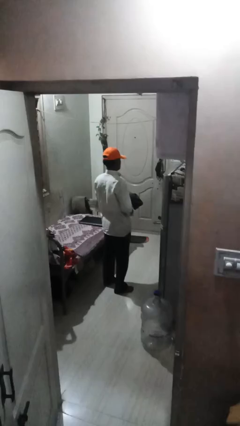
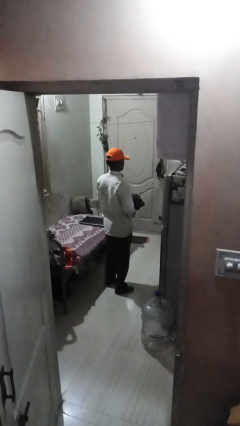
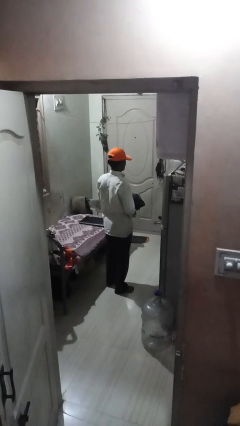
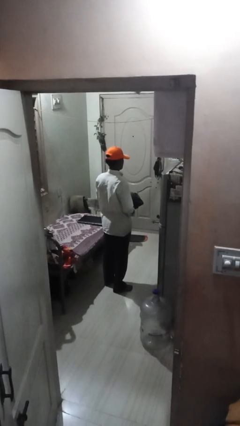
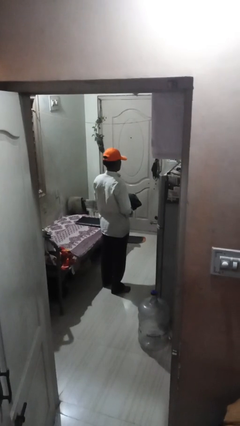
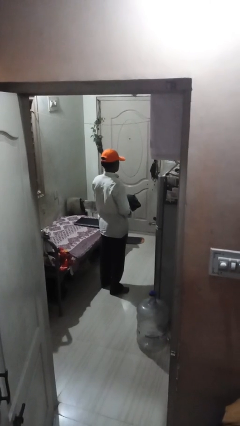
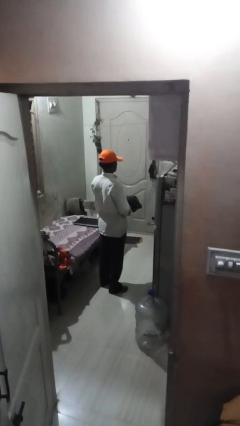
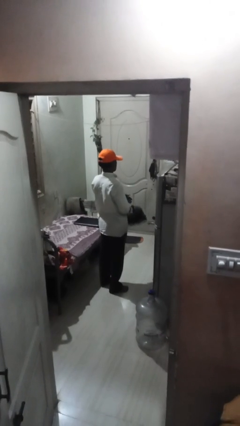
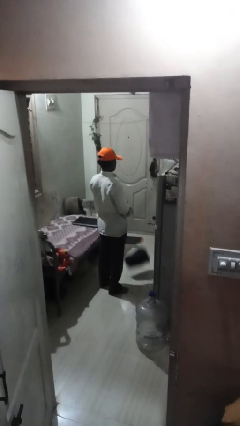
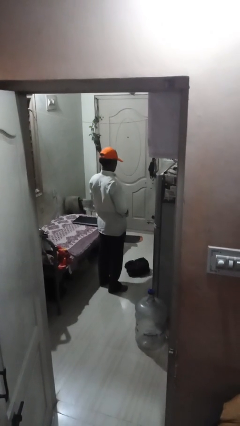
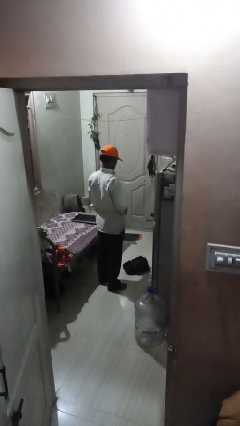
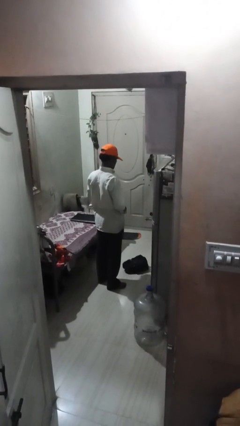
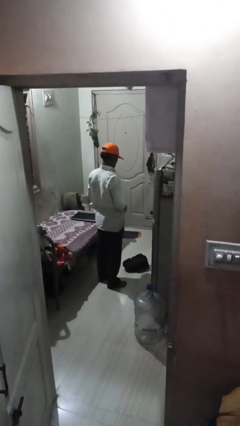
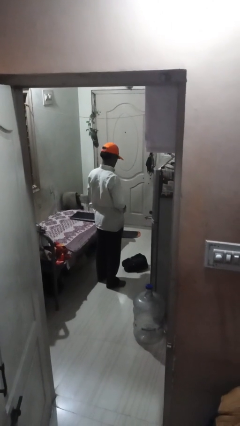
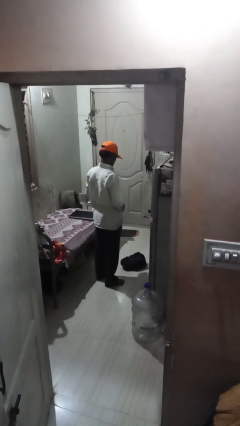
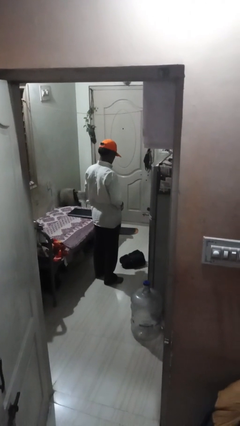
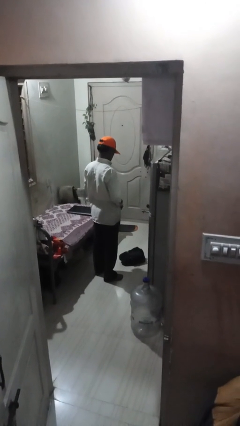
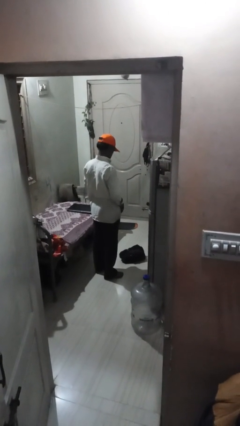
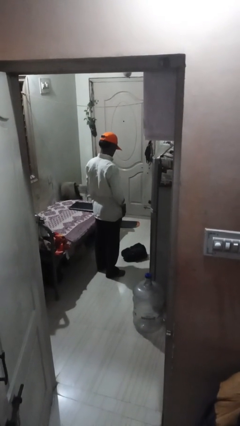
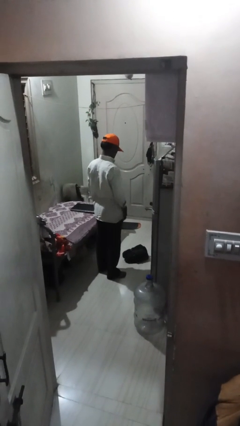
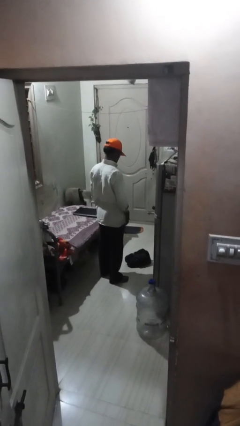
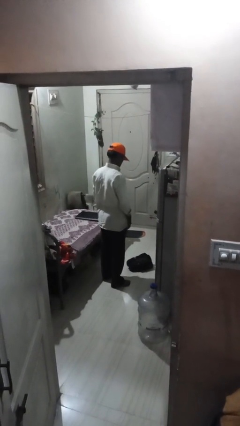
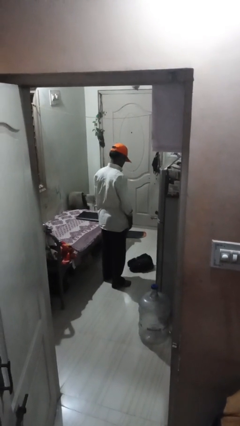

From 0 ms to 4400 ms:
person drops object

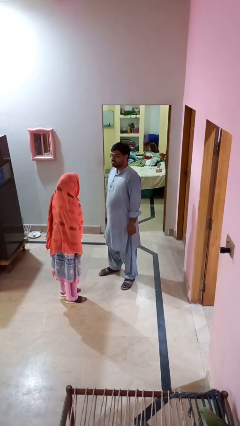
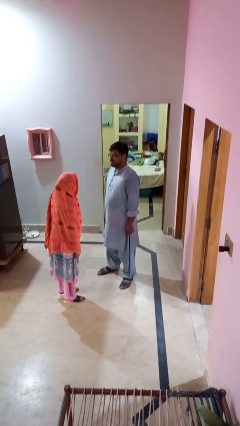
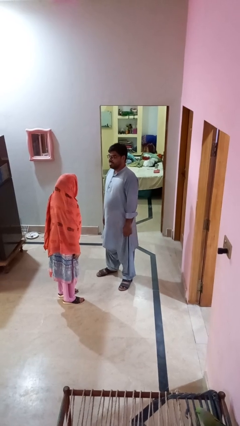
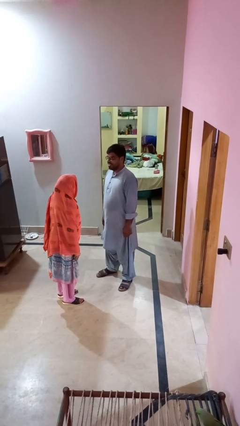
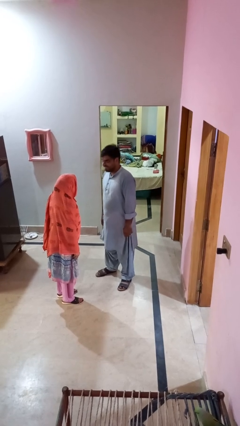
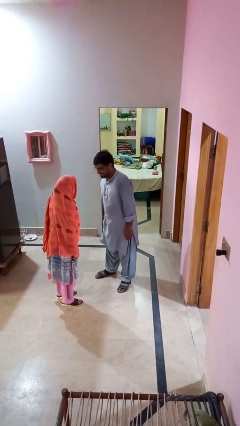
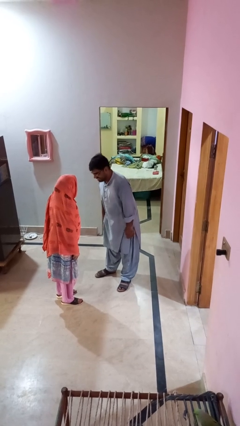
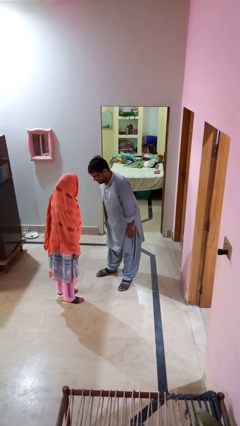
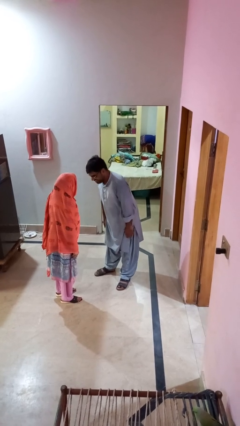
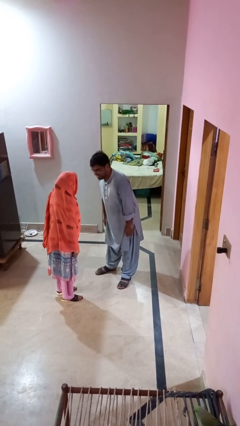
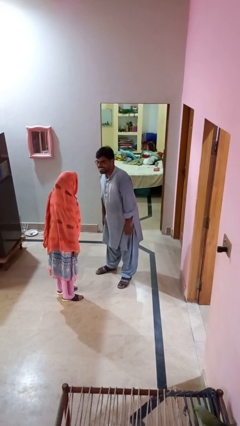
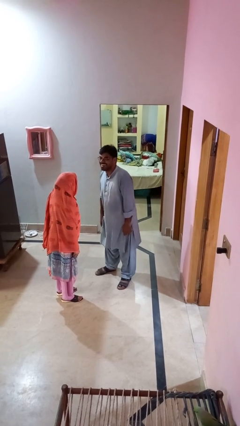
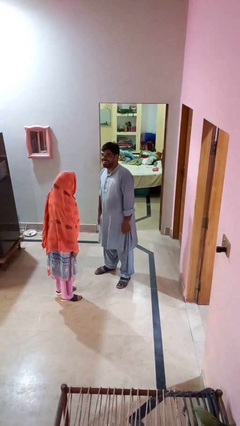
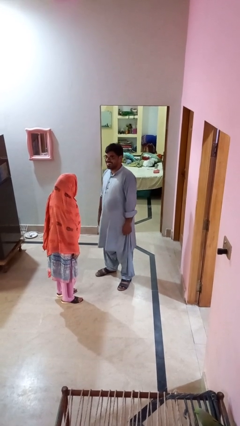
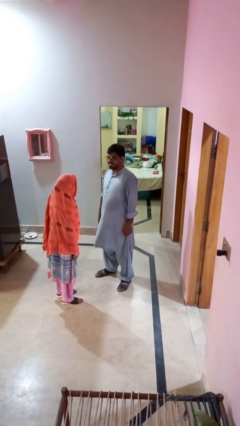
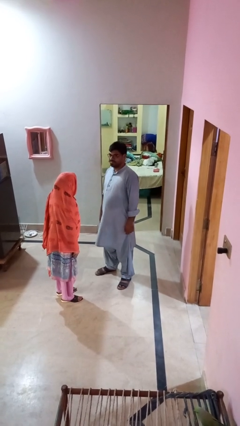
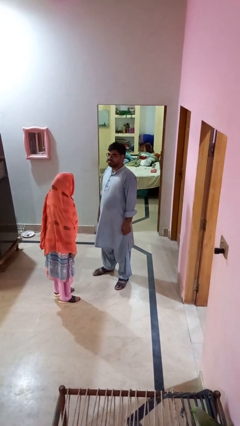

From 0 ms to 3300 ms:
person laughs with person

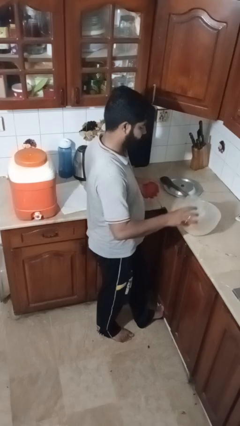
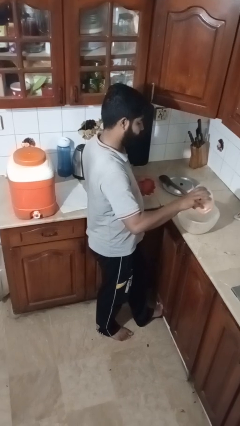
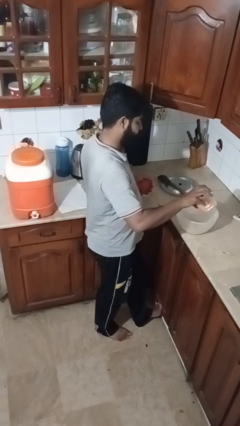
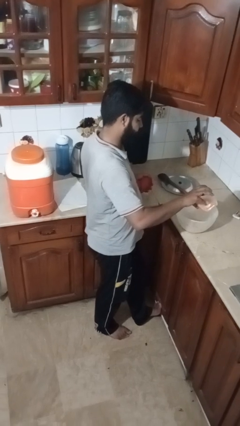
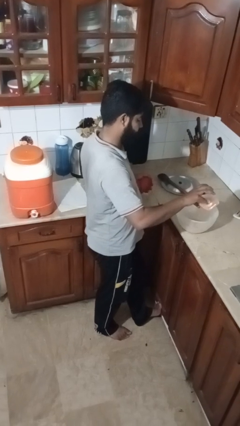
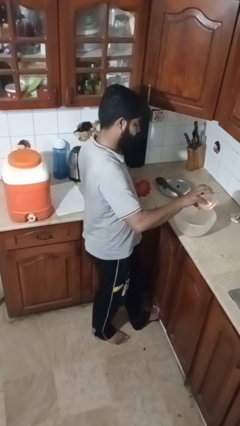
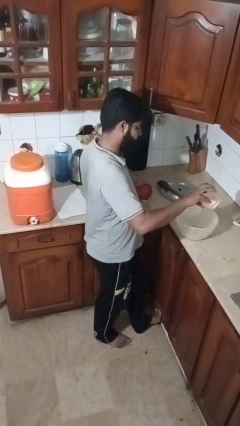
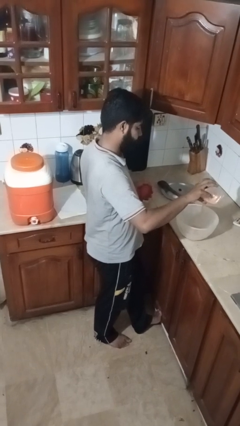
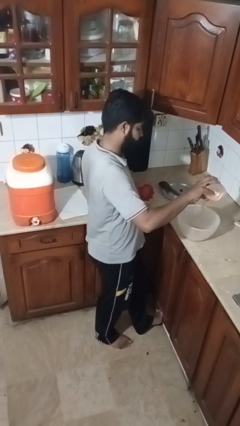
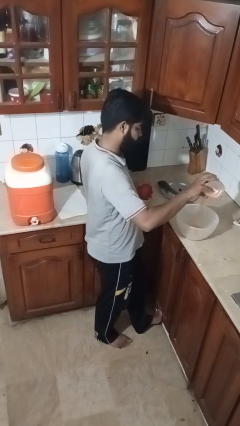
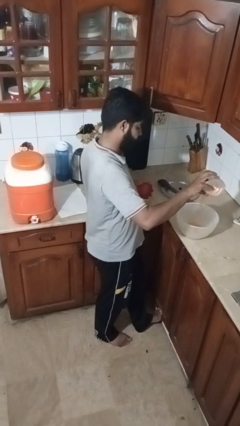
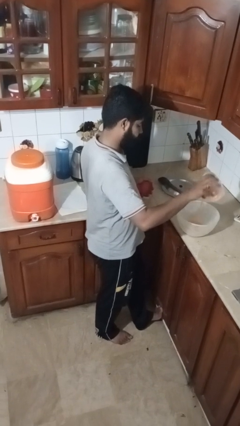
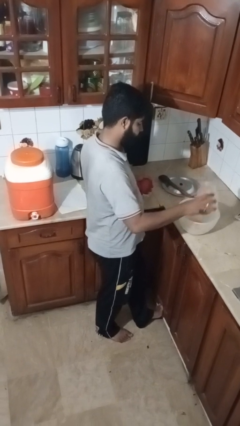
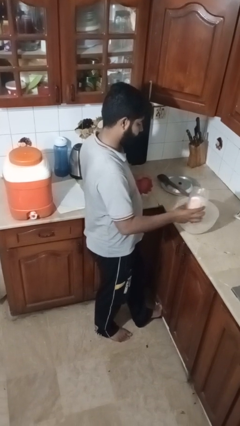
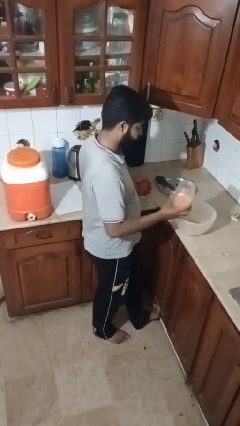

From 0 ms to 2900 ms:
person pours into bowl

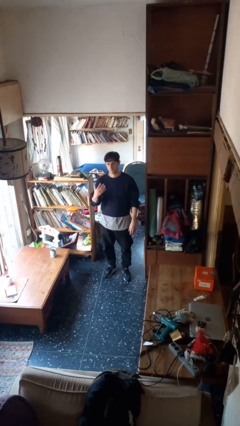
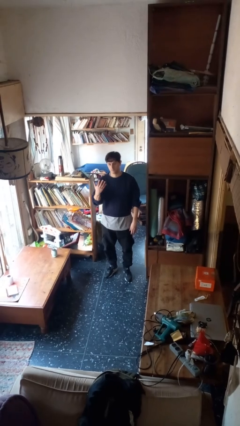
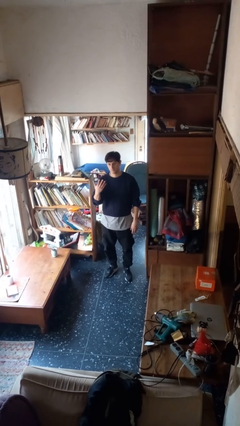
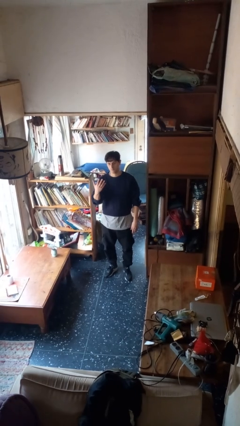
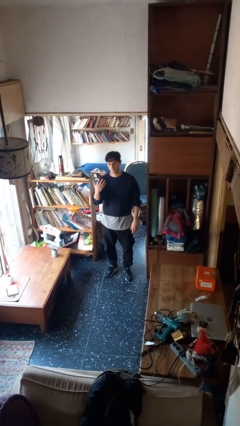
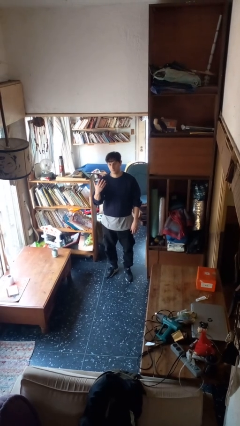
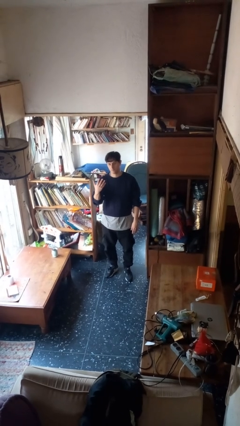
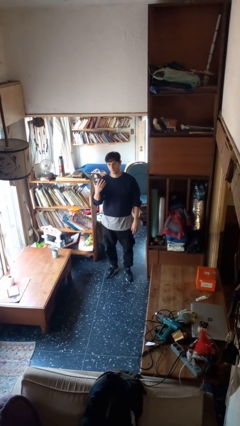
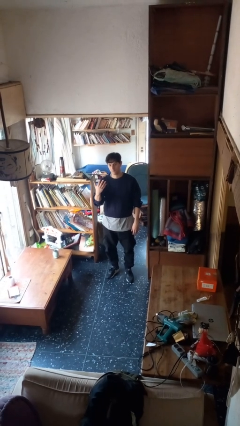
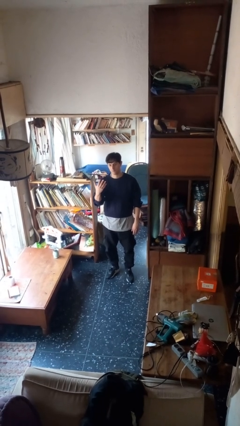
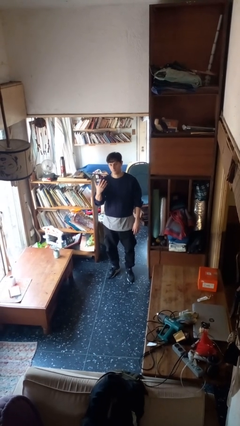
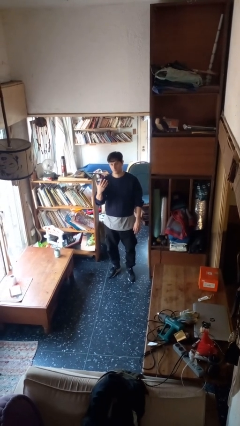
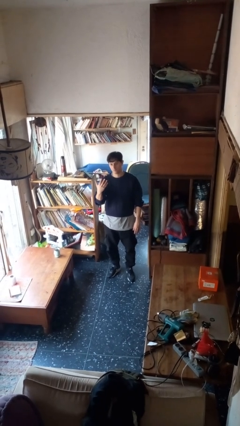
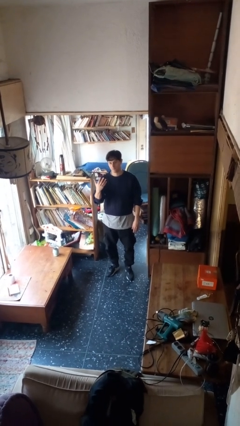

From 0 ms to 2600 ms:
person gestures number five

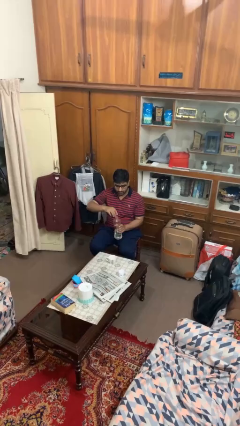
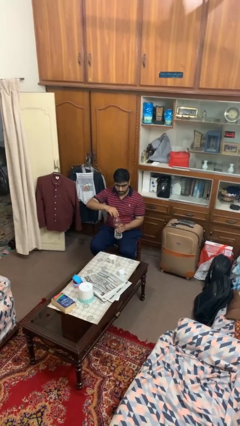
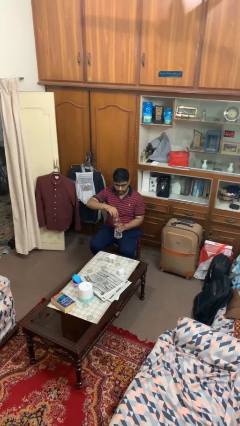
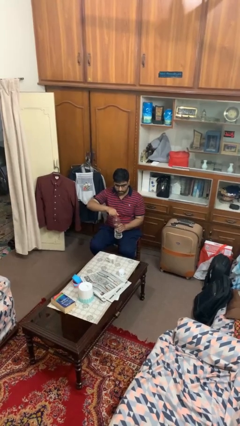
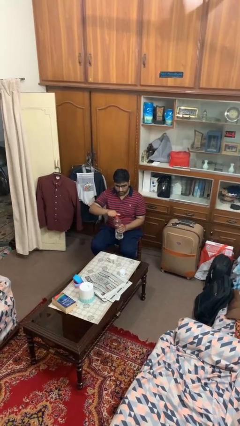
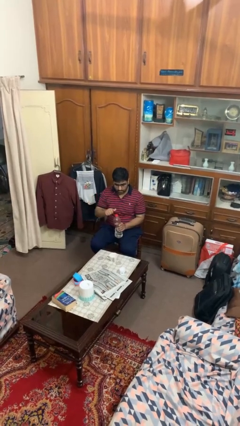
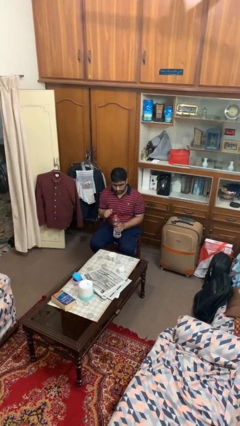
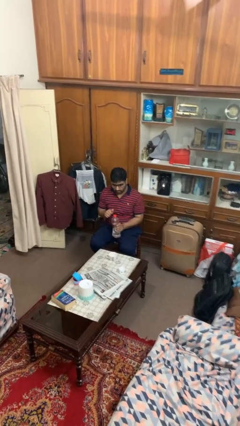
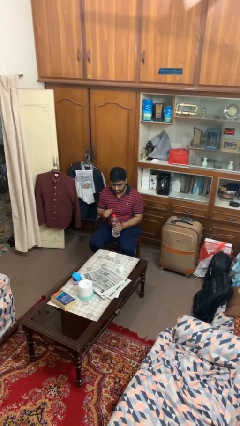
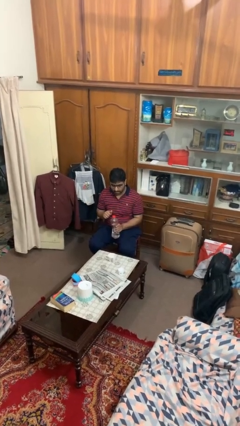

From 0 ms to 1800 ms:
person screws lid to bottle

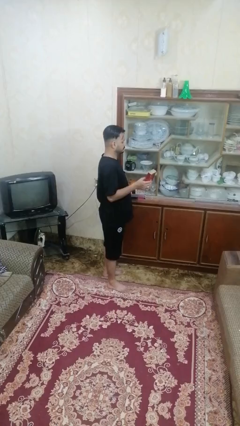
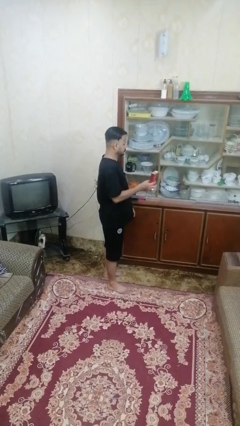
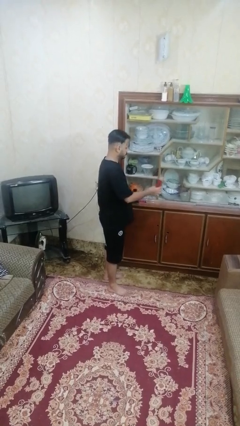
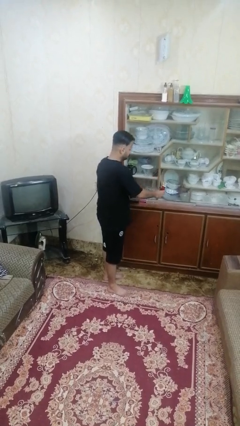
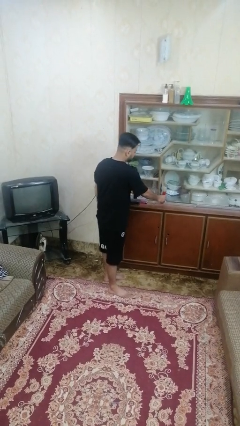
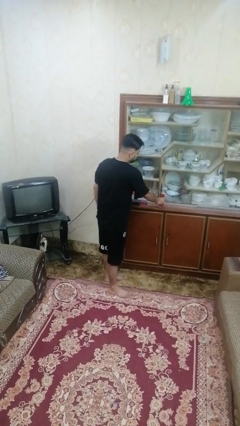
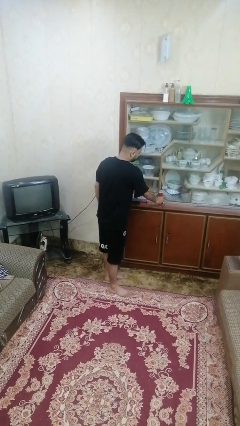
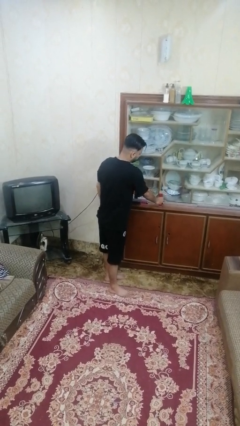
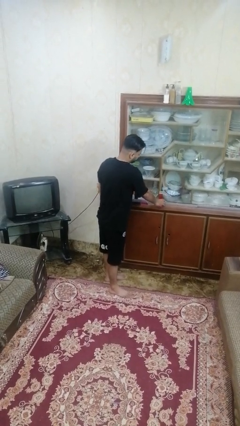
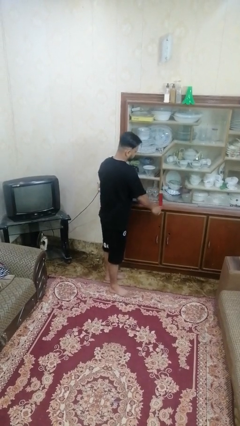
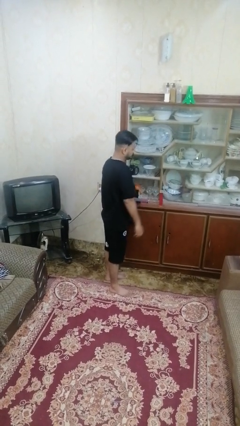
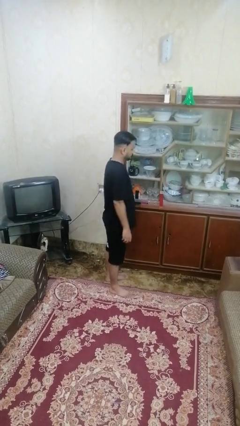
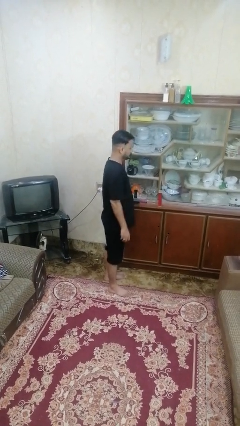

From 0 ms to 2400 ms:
person puts down object on shelf
